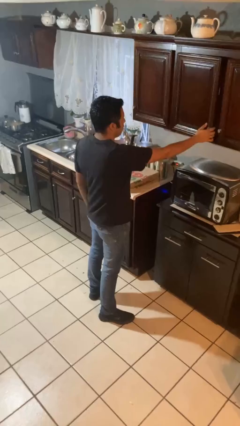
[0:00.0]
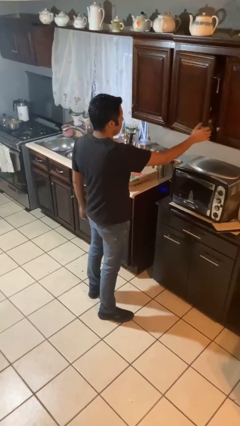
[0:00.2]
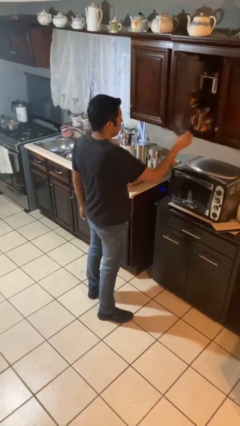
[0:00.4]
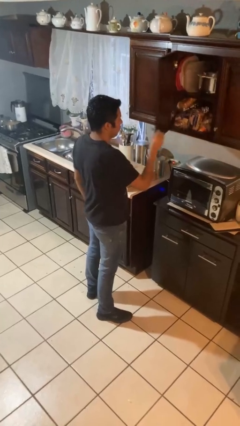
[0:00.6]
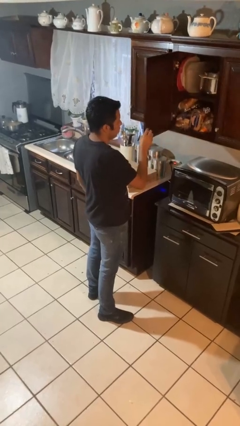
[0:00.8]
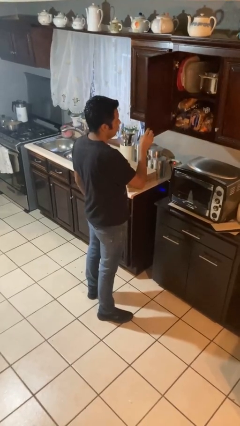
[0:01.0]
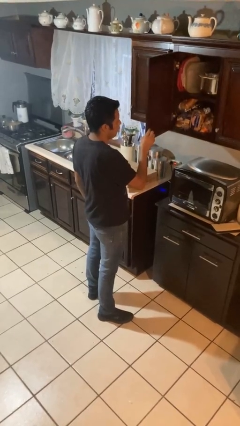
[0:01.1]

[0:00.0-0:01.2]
person opens cabinet

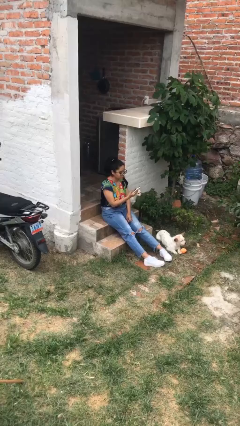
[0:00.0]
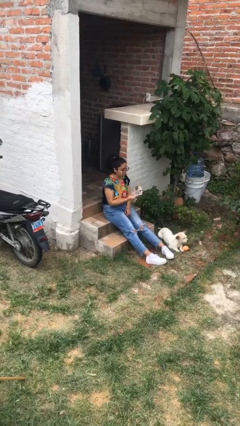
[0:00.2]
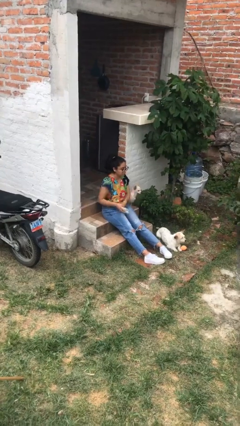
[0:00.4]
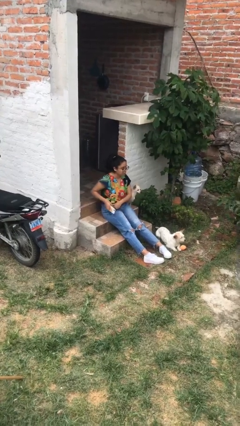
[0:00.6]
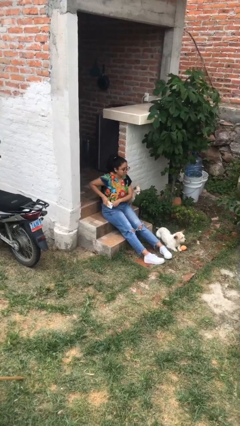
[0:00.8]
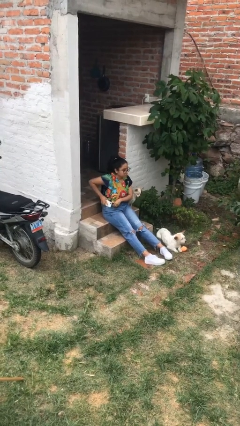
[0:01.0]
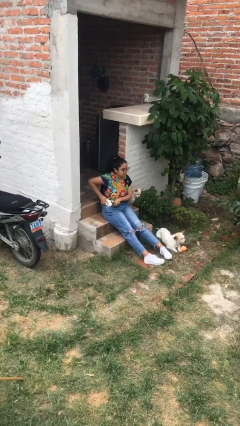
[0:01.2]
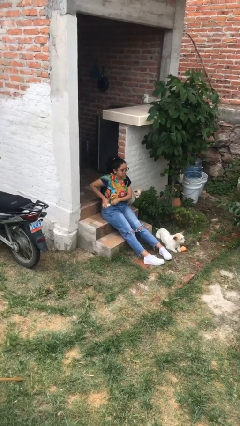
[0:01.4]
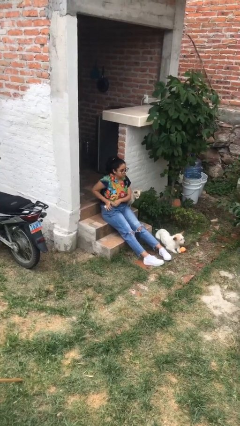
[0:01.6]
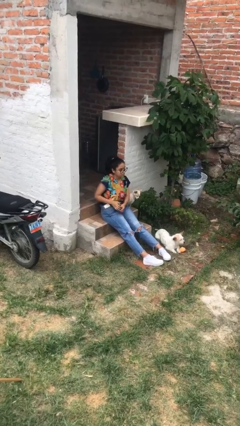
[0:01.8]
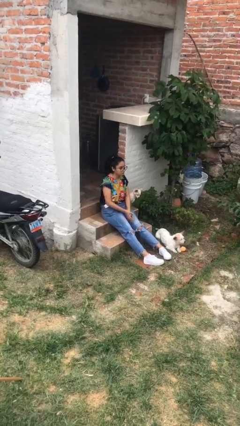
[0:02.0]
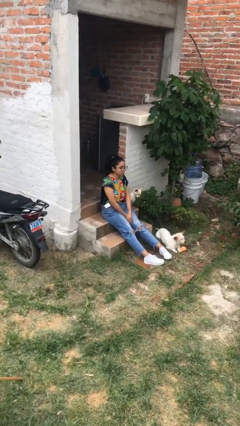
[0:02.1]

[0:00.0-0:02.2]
person puts phone into pocket

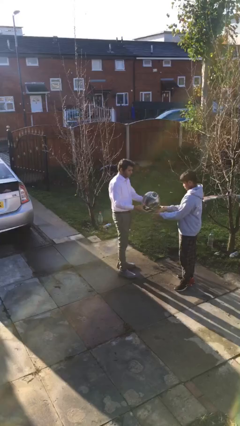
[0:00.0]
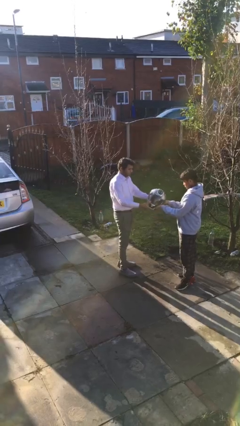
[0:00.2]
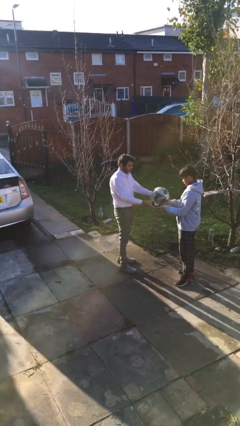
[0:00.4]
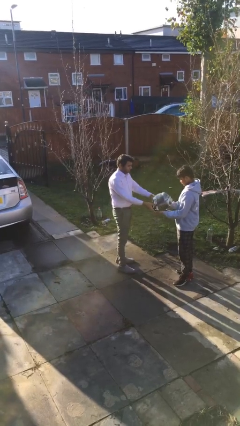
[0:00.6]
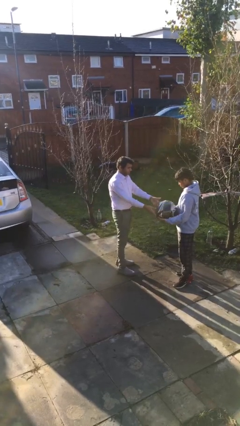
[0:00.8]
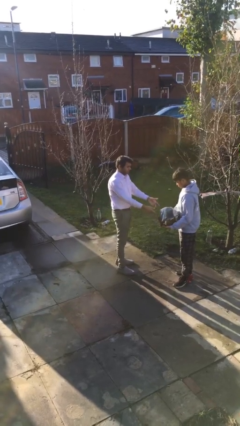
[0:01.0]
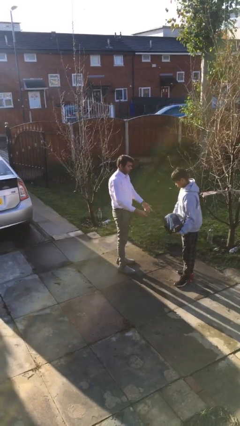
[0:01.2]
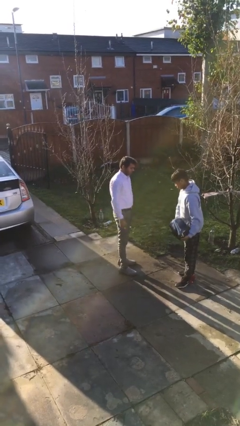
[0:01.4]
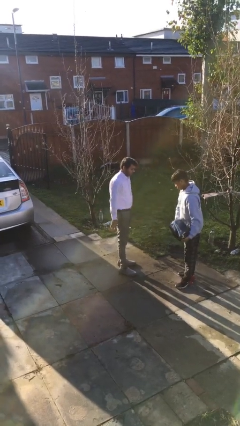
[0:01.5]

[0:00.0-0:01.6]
person transfers object to person

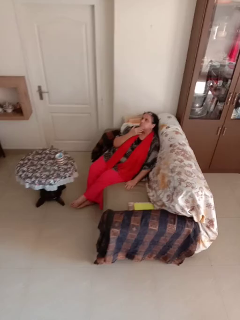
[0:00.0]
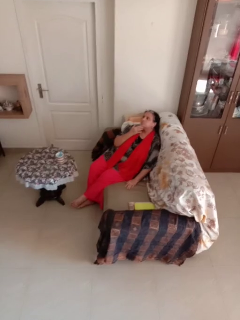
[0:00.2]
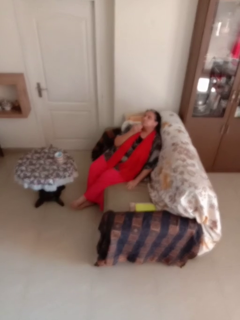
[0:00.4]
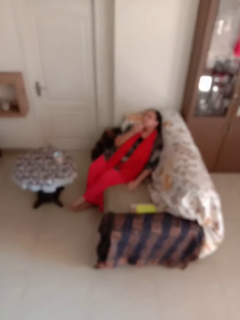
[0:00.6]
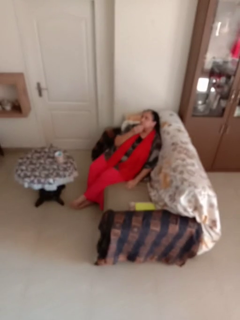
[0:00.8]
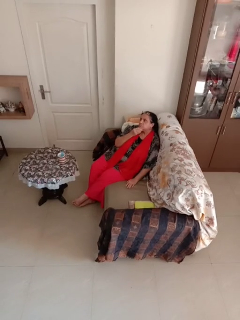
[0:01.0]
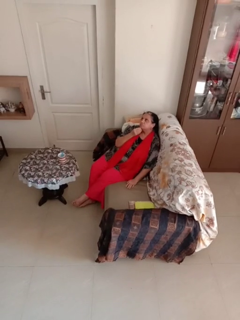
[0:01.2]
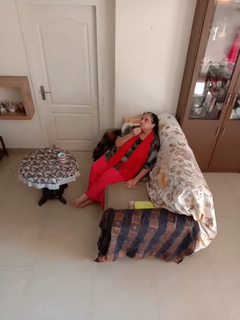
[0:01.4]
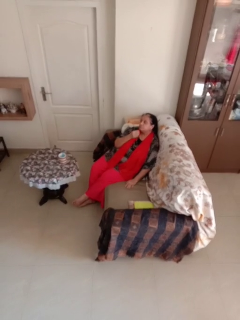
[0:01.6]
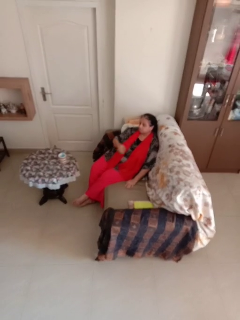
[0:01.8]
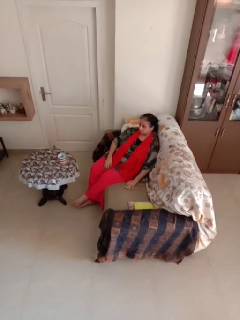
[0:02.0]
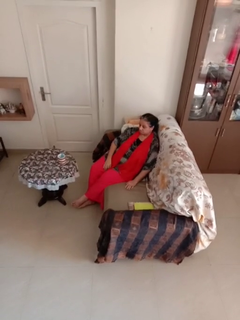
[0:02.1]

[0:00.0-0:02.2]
person strokes chin

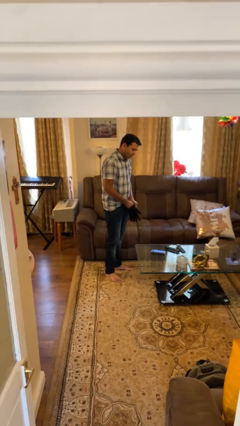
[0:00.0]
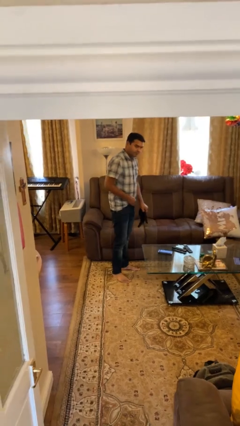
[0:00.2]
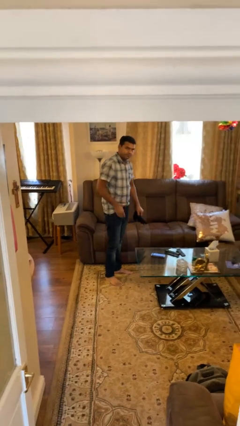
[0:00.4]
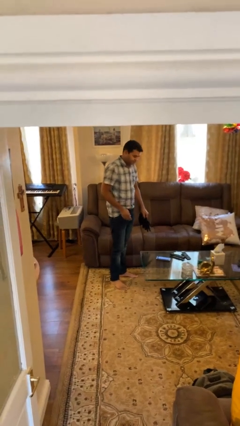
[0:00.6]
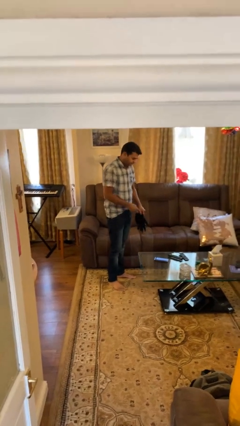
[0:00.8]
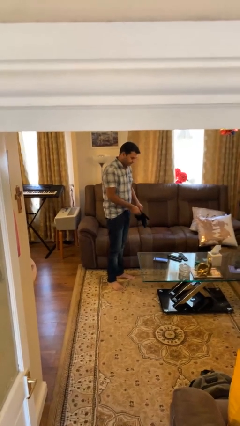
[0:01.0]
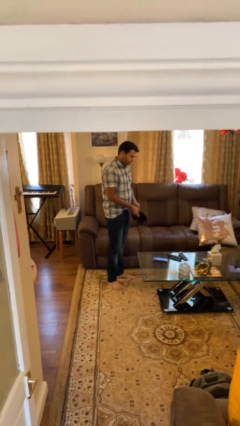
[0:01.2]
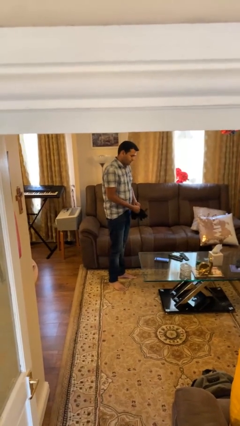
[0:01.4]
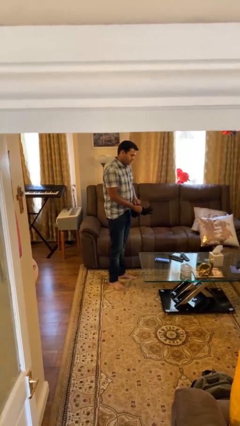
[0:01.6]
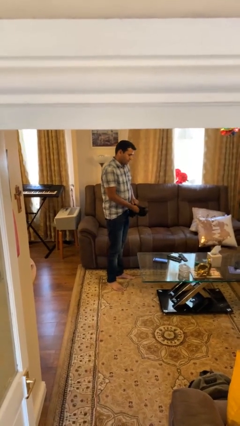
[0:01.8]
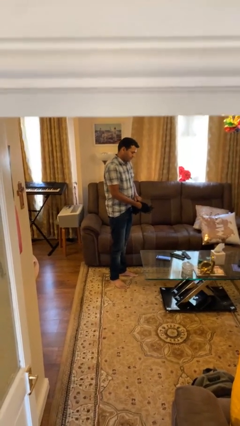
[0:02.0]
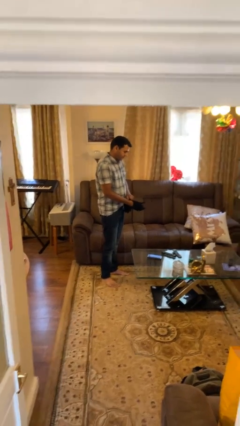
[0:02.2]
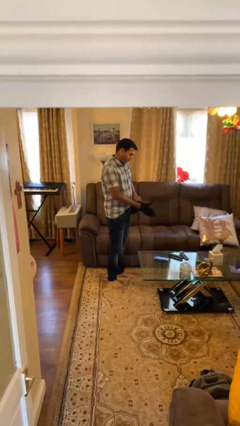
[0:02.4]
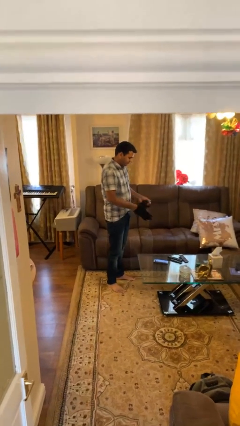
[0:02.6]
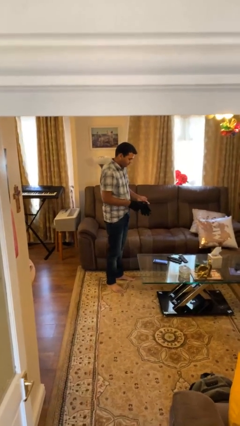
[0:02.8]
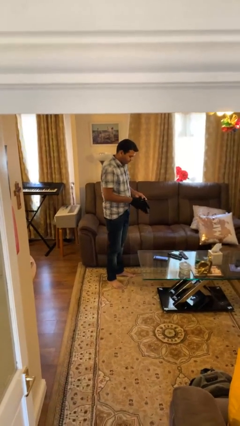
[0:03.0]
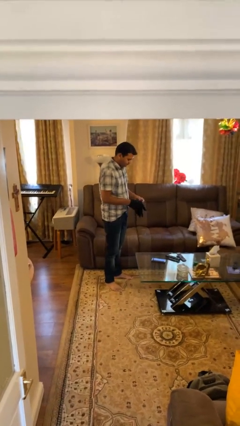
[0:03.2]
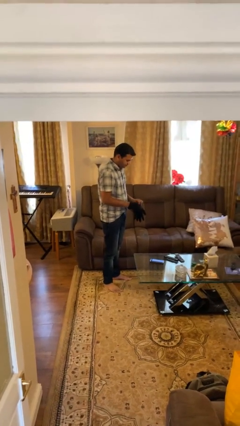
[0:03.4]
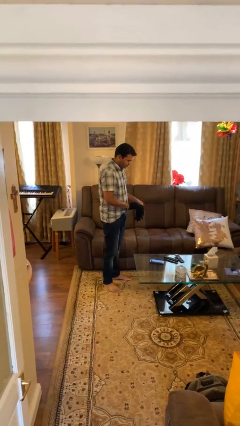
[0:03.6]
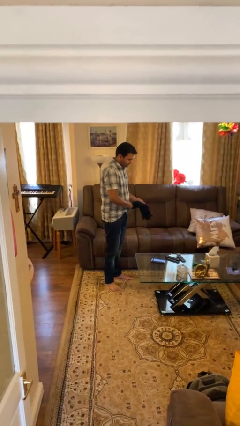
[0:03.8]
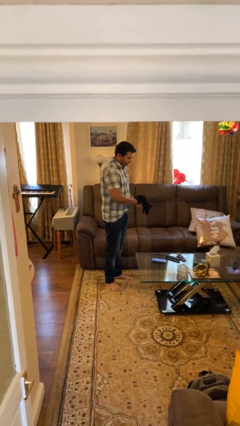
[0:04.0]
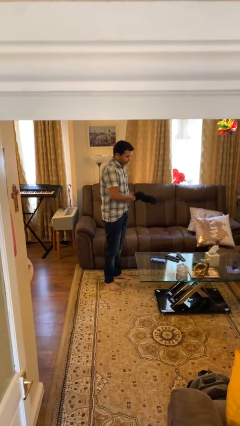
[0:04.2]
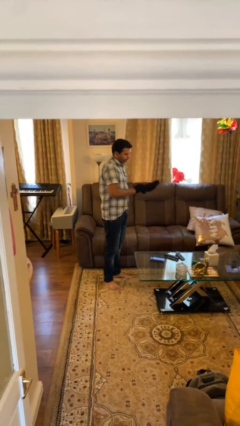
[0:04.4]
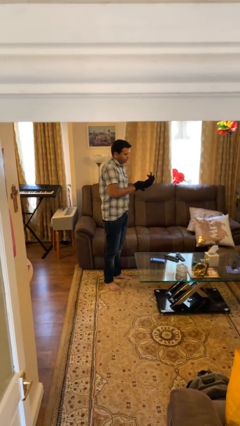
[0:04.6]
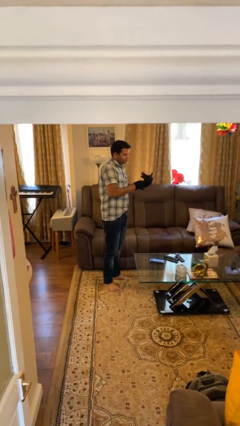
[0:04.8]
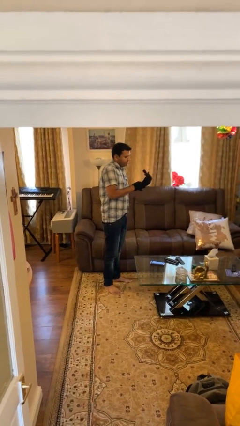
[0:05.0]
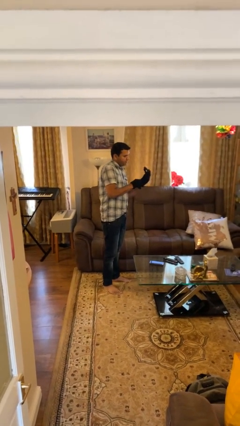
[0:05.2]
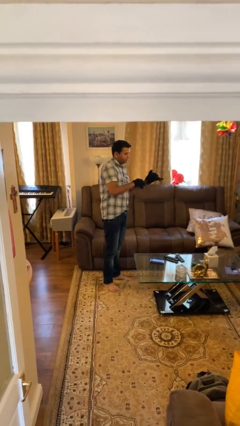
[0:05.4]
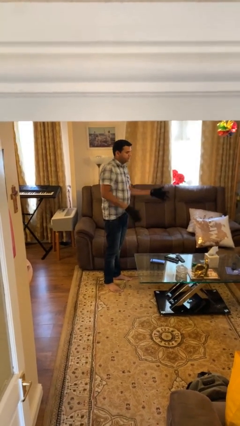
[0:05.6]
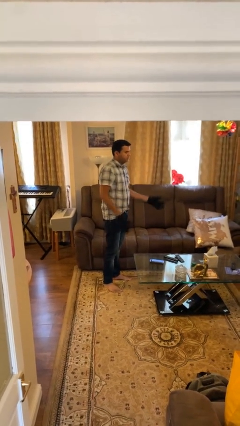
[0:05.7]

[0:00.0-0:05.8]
person puts on gloves

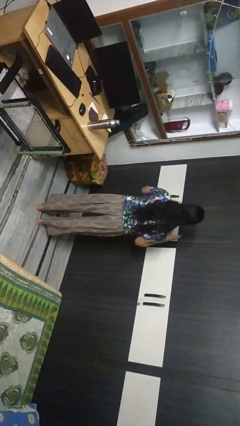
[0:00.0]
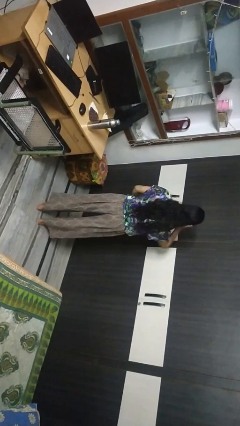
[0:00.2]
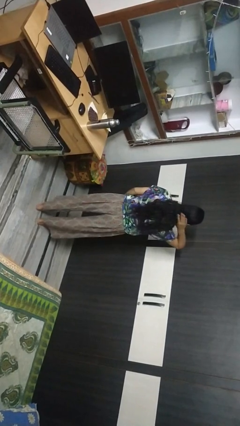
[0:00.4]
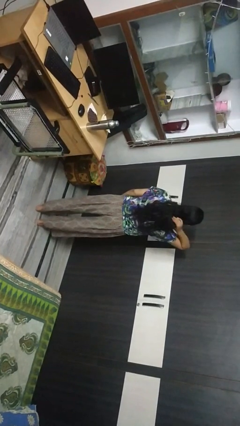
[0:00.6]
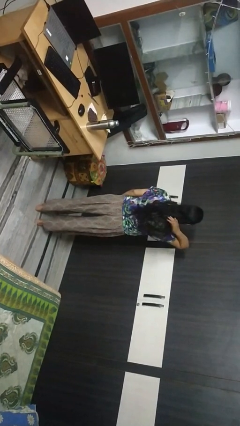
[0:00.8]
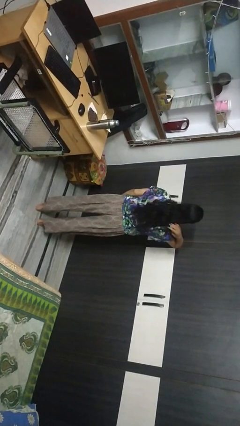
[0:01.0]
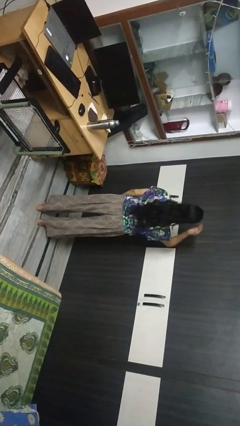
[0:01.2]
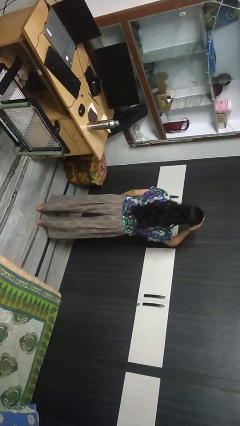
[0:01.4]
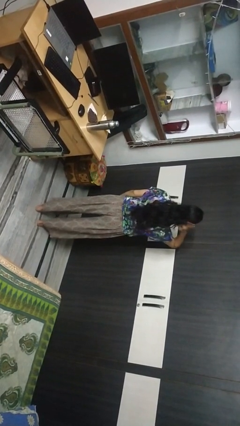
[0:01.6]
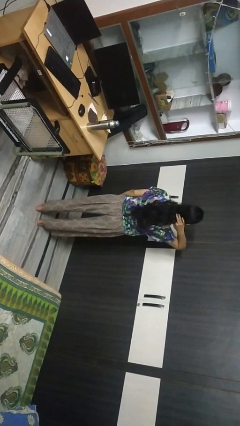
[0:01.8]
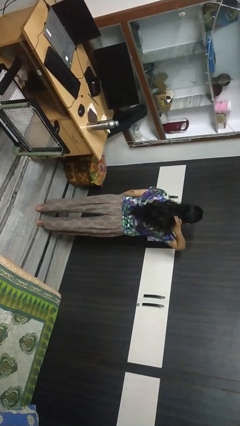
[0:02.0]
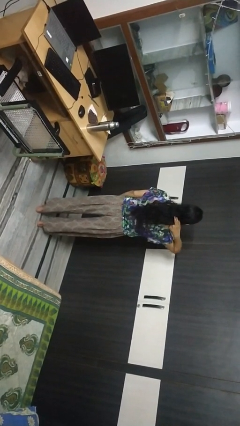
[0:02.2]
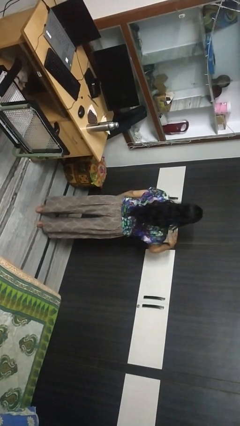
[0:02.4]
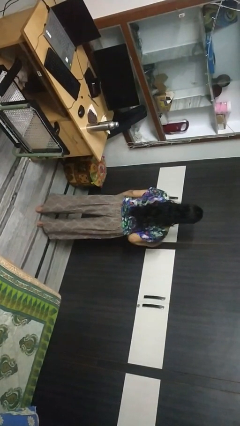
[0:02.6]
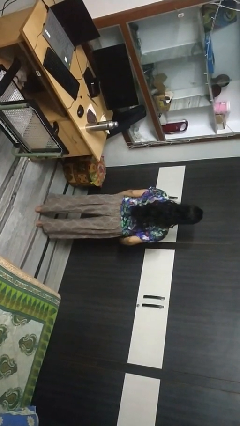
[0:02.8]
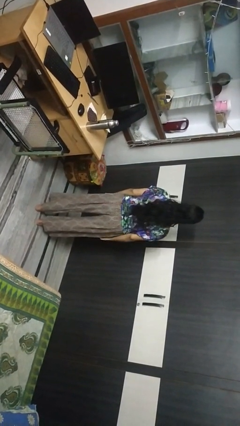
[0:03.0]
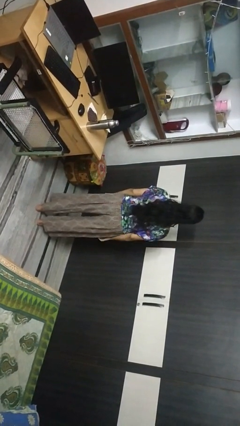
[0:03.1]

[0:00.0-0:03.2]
person strokes hair

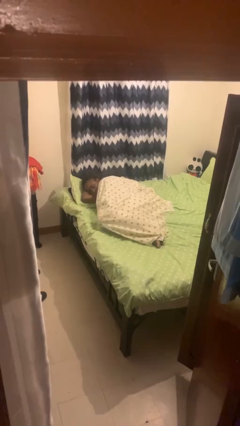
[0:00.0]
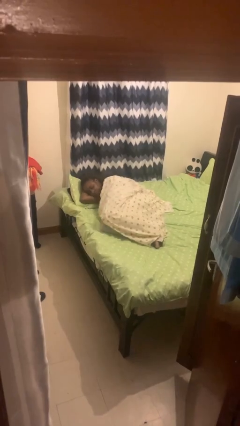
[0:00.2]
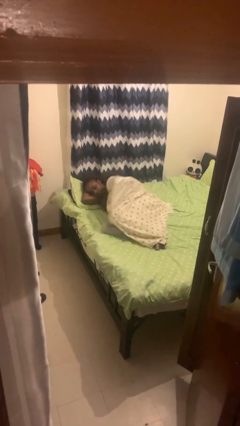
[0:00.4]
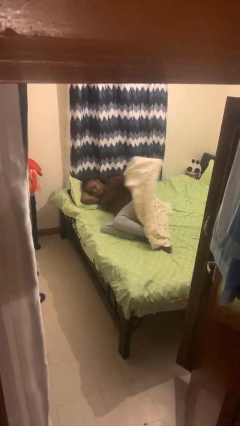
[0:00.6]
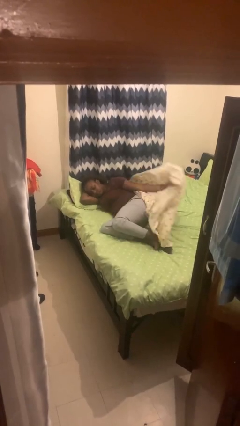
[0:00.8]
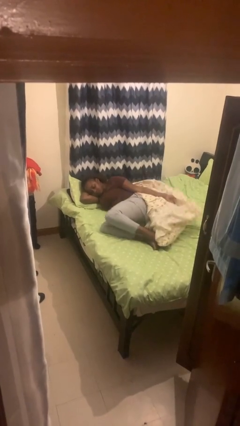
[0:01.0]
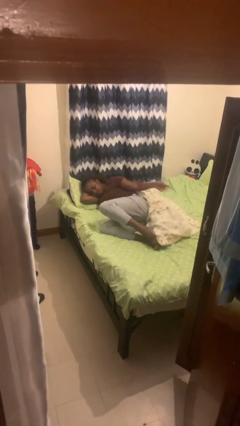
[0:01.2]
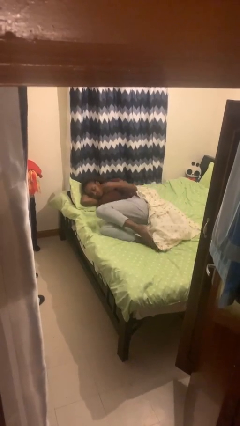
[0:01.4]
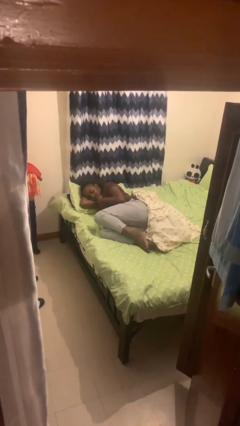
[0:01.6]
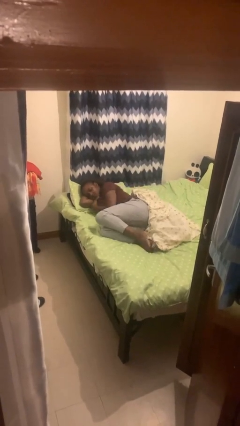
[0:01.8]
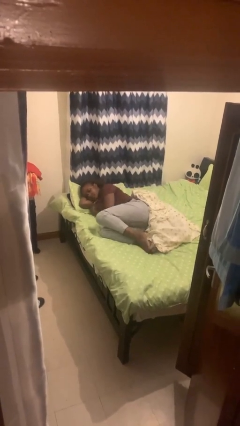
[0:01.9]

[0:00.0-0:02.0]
person uncovers with bedsheets
